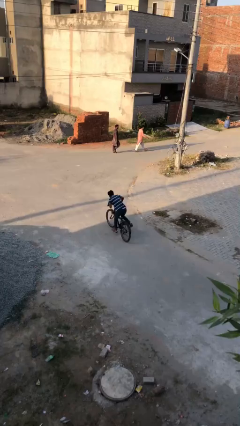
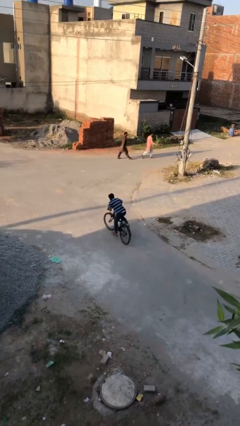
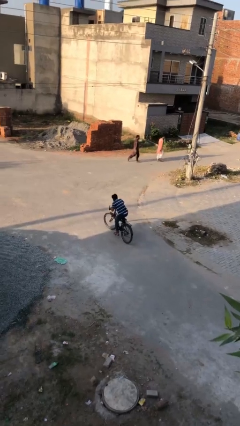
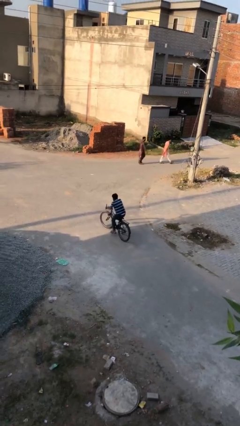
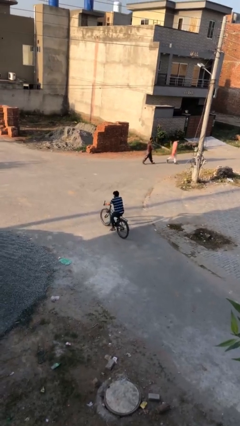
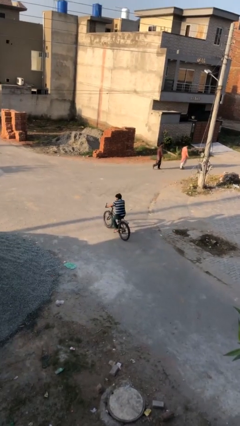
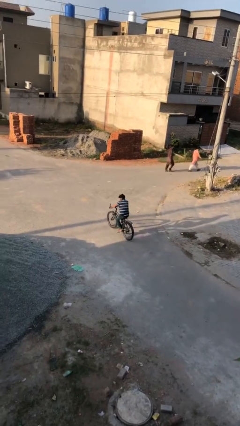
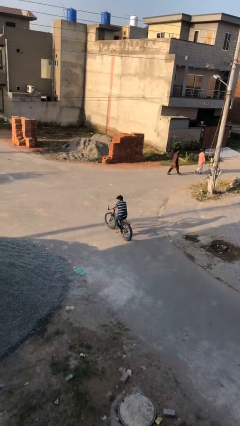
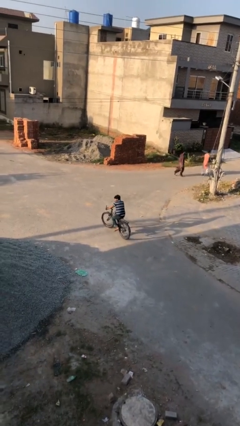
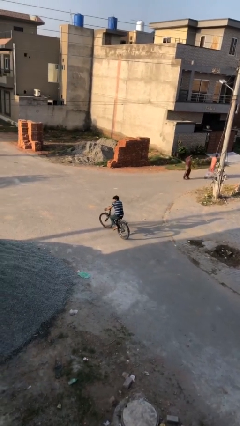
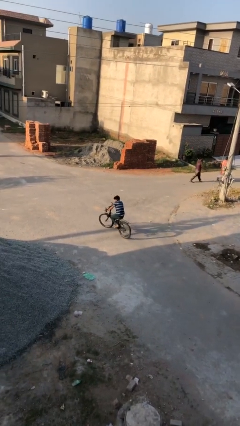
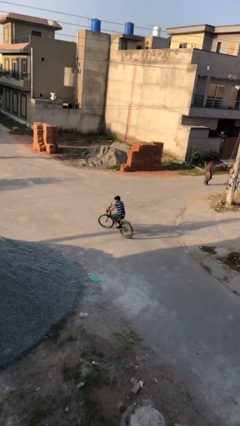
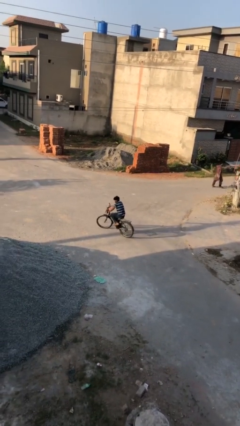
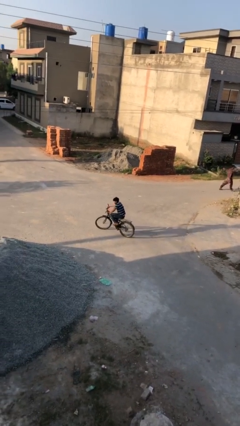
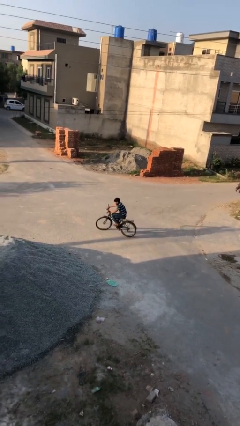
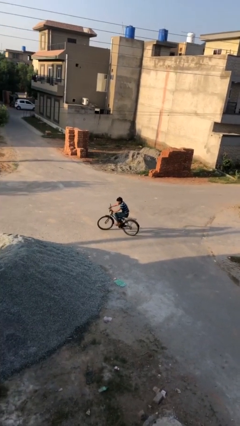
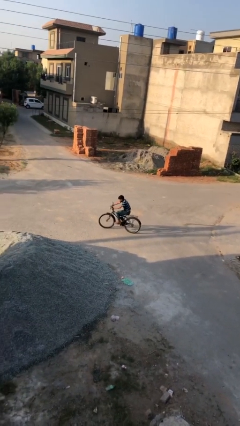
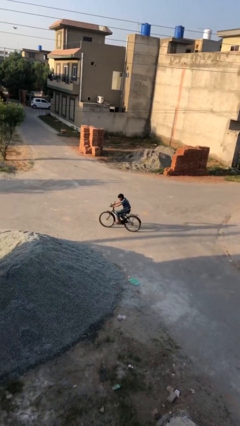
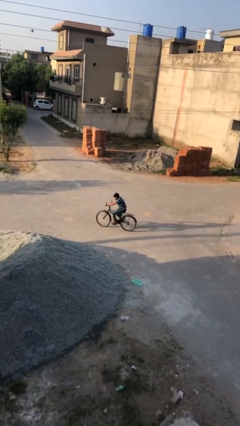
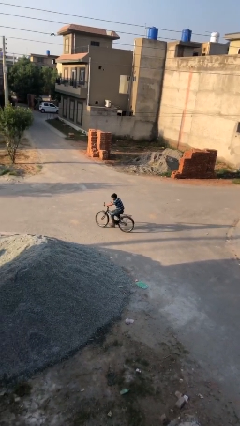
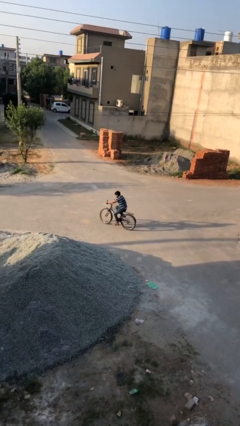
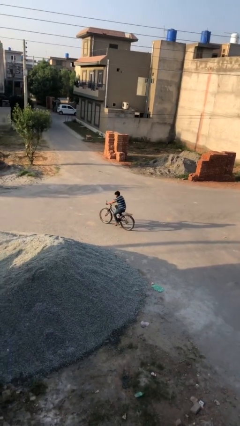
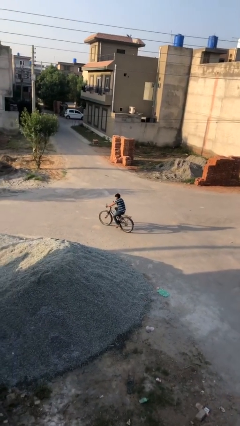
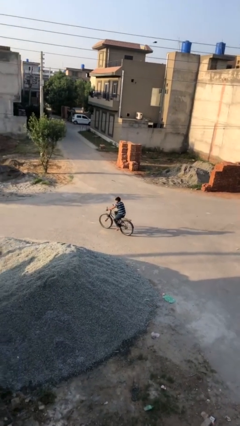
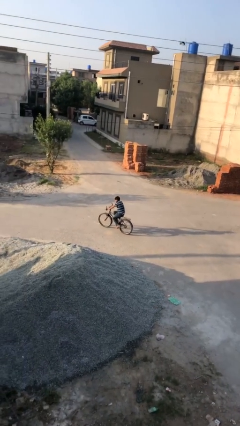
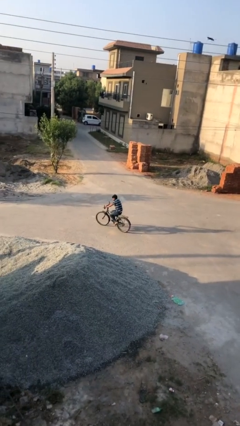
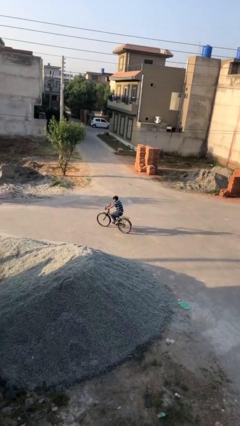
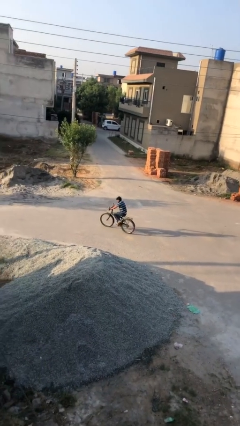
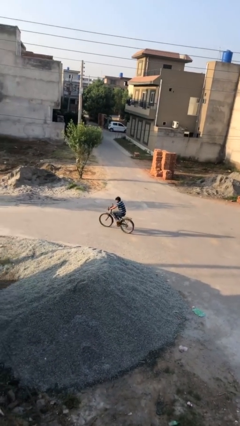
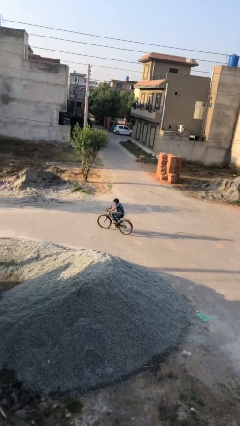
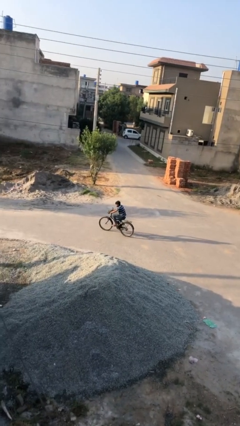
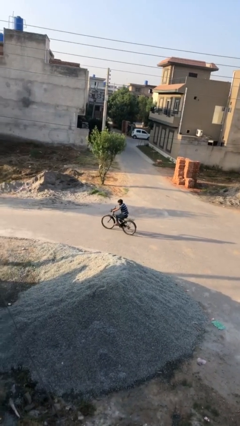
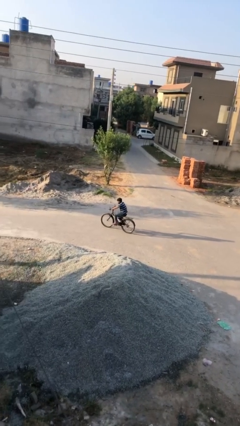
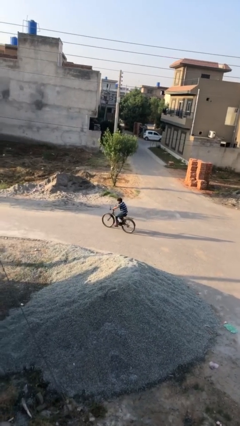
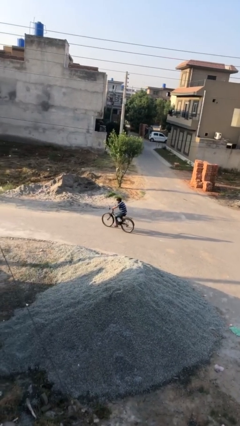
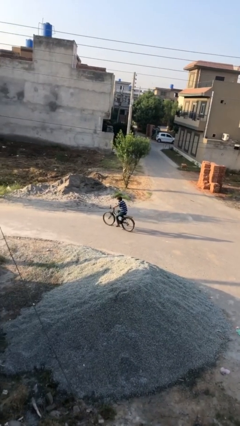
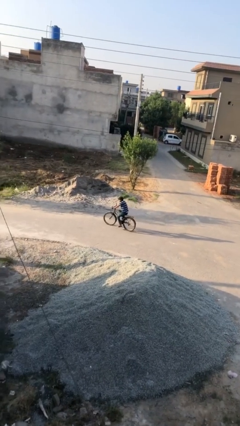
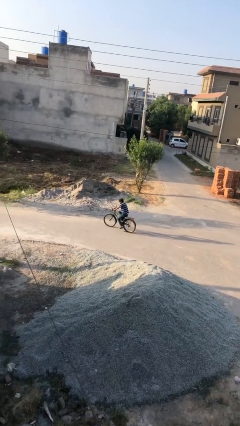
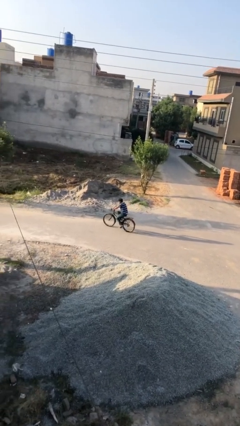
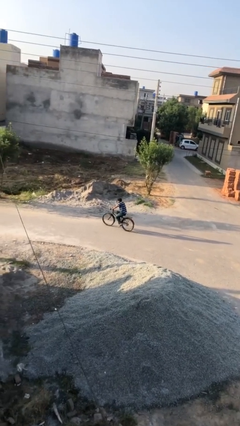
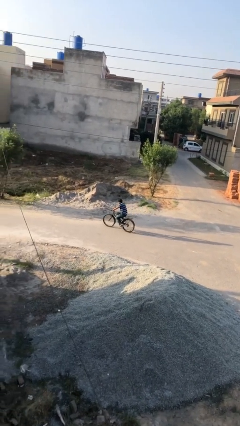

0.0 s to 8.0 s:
person rides bicycle

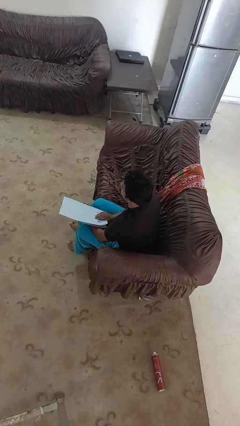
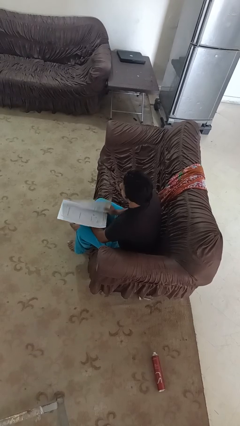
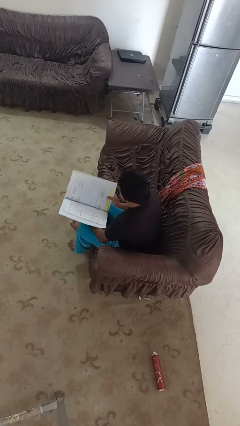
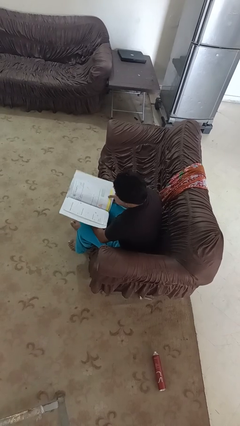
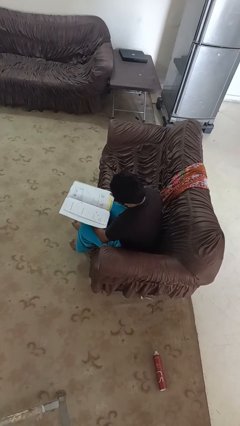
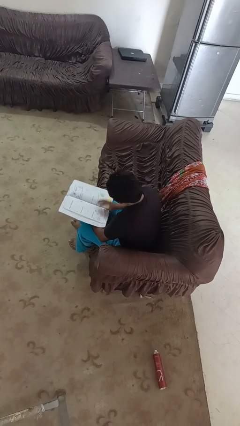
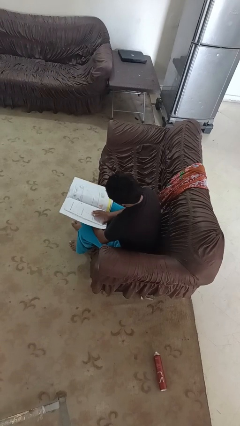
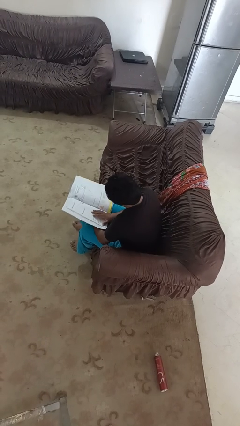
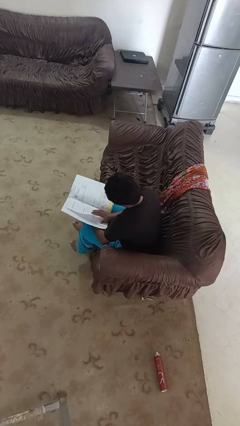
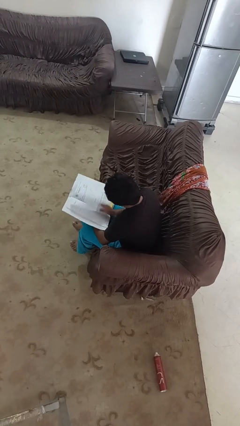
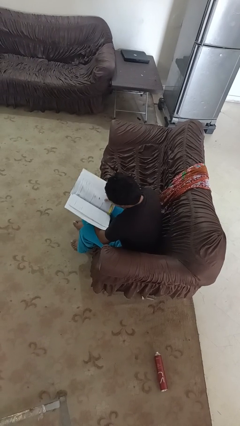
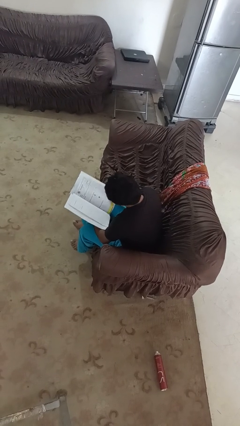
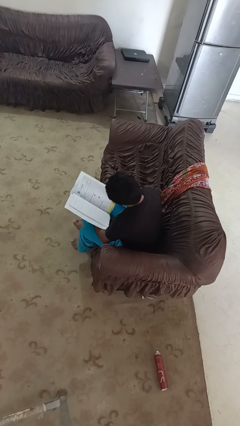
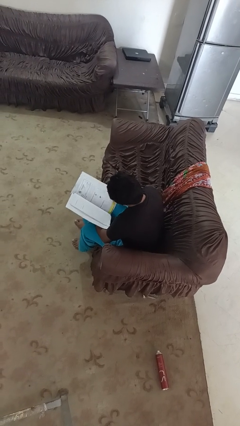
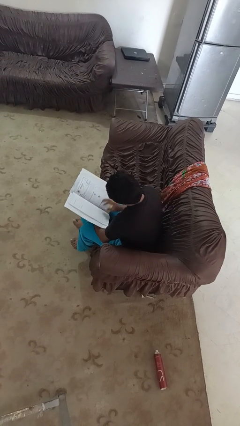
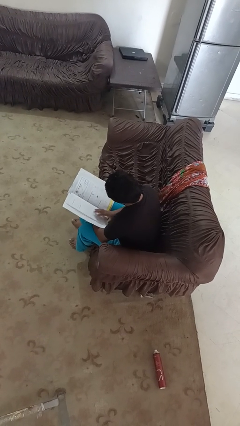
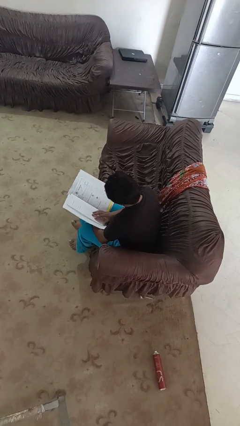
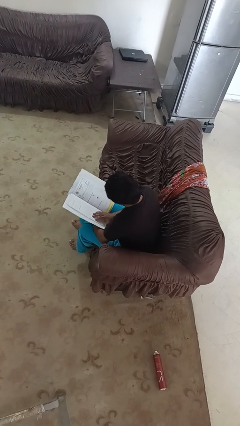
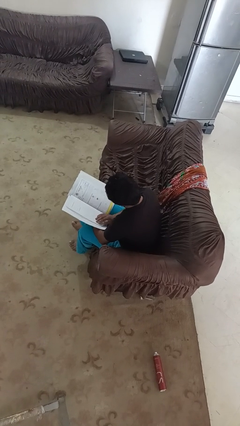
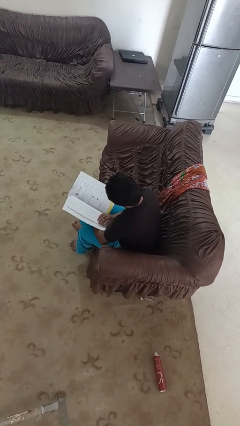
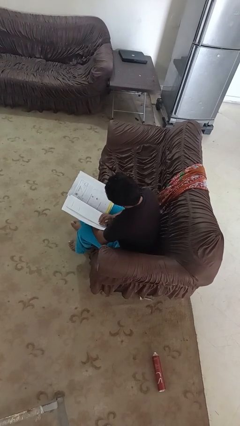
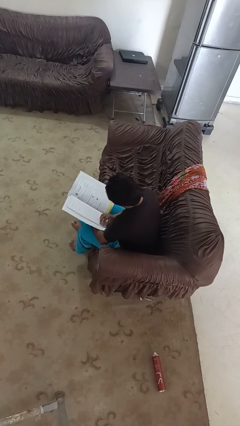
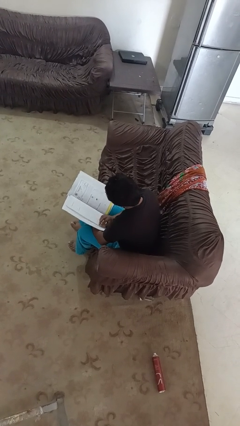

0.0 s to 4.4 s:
person reads magazine

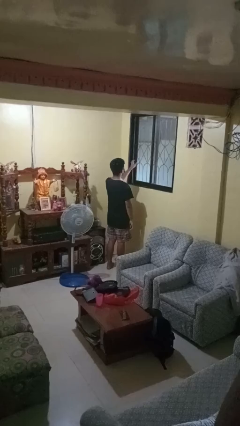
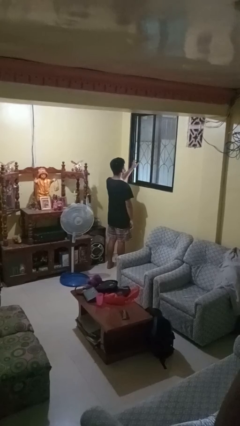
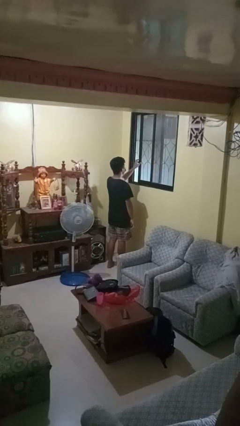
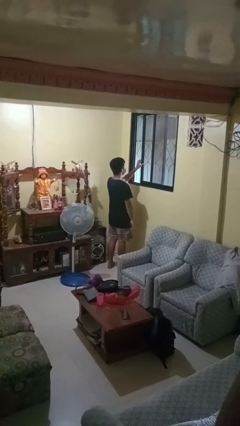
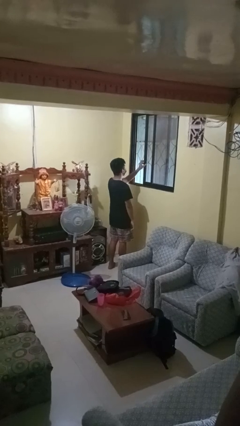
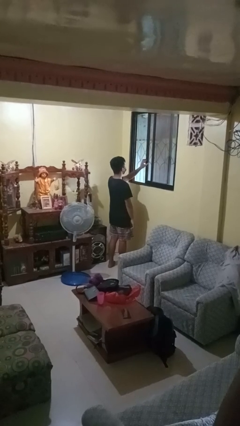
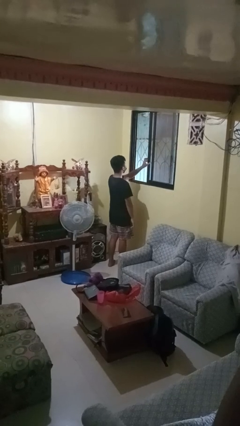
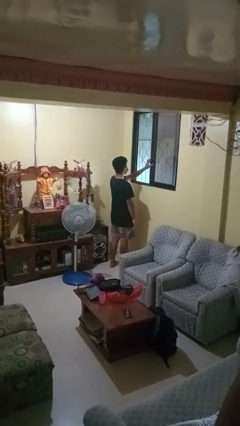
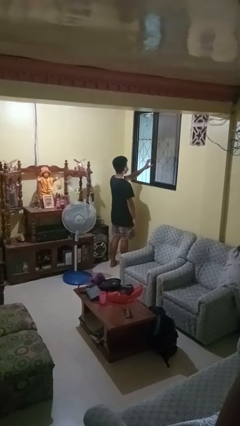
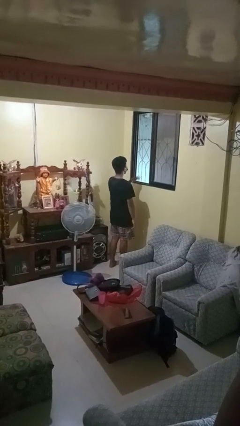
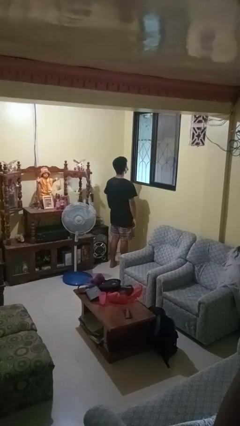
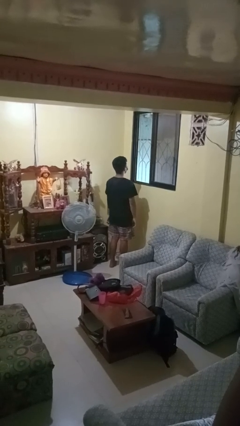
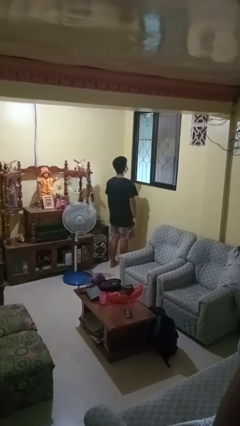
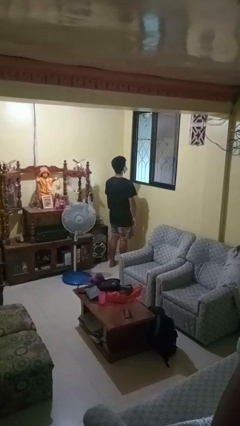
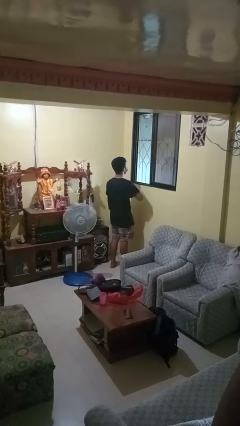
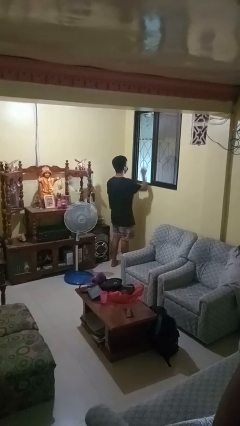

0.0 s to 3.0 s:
person opens home window

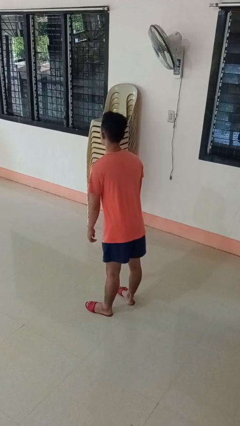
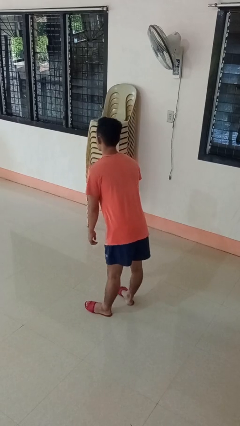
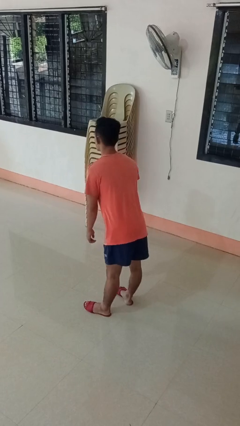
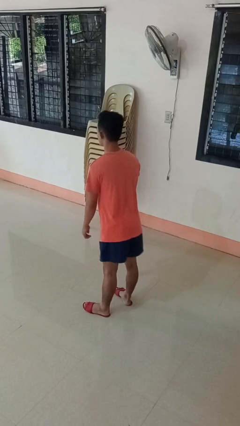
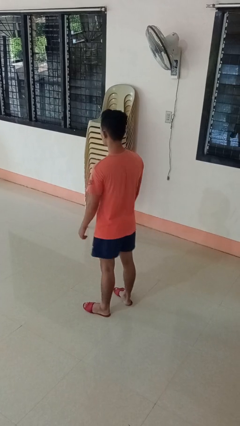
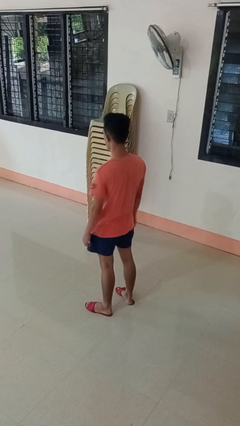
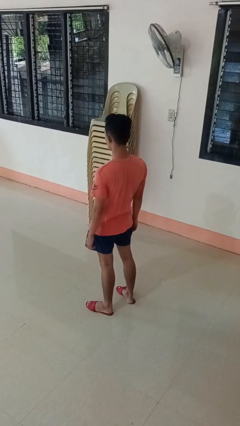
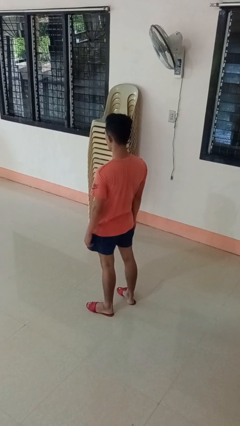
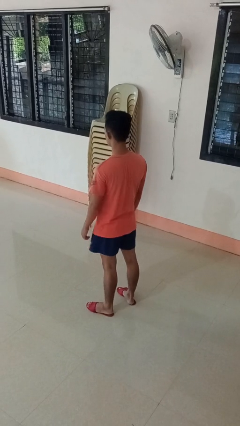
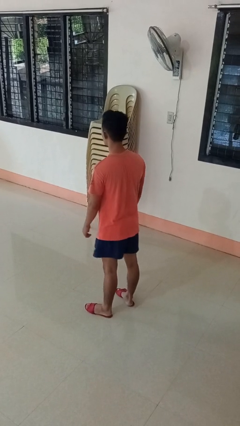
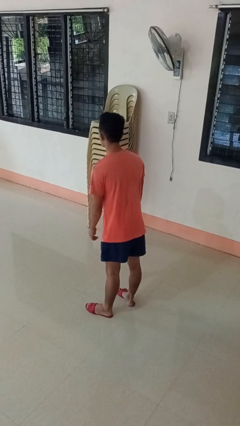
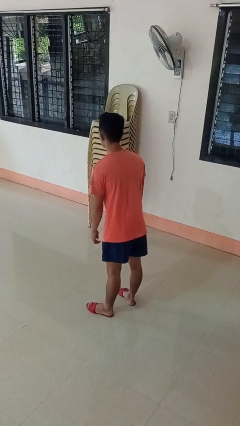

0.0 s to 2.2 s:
person wiggles hips

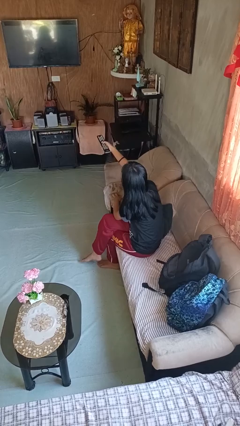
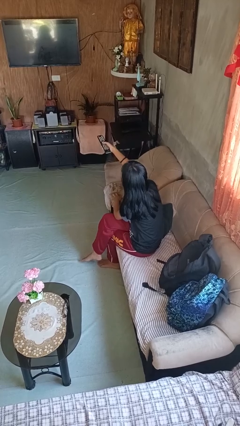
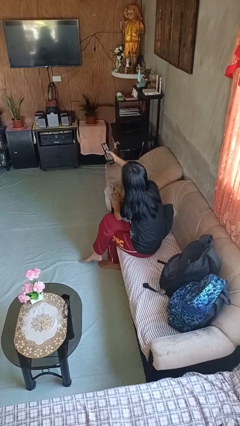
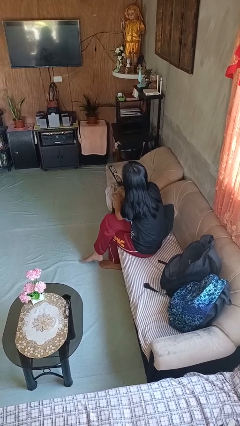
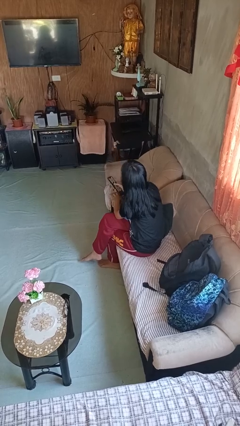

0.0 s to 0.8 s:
person uses television remote
